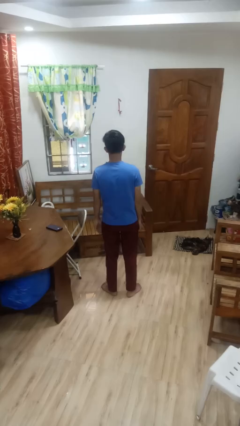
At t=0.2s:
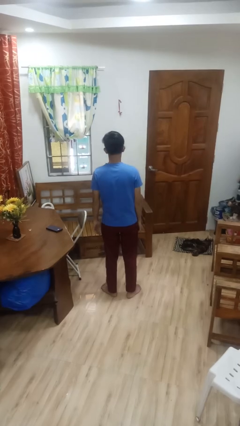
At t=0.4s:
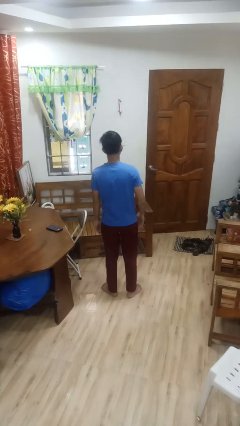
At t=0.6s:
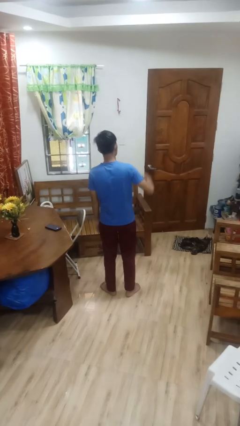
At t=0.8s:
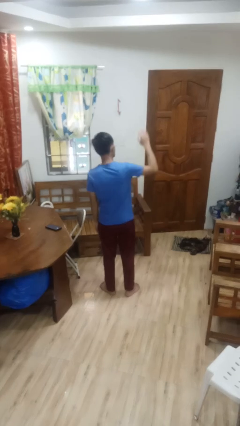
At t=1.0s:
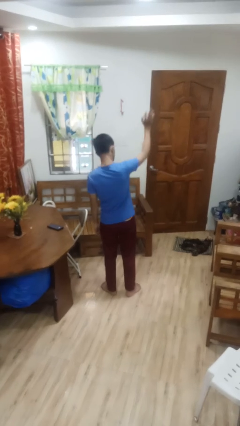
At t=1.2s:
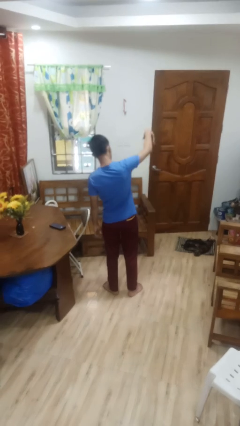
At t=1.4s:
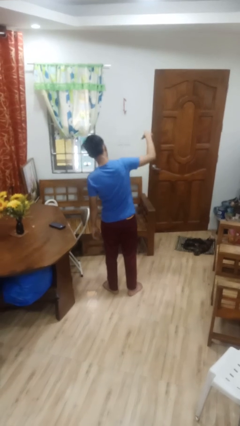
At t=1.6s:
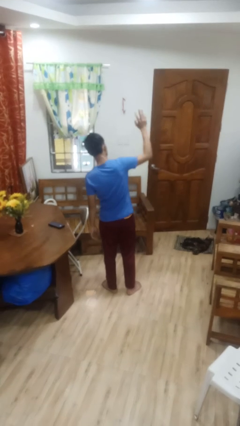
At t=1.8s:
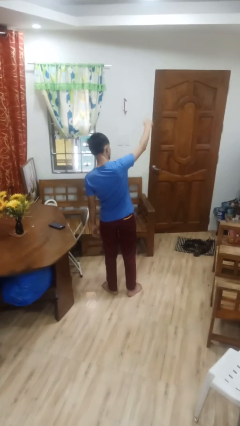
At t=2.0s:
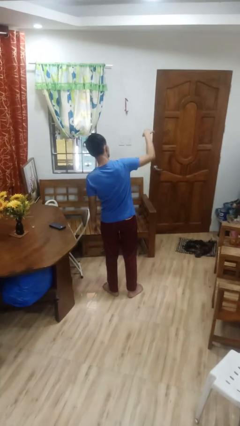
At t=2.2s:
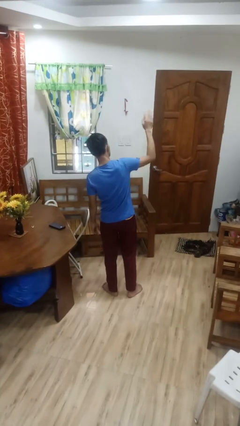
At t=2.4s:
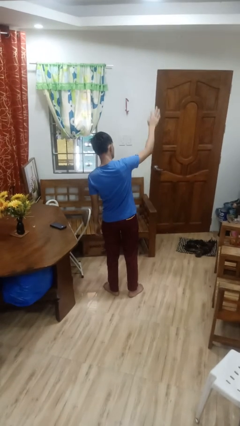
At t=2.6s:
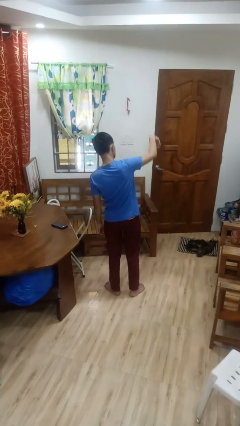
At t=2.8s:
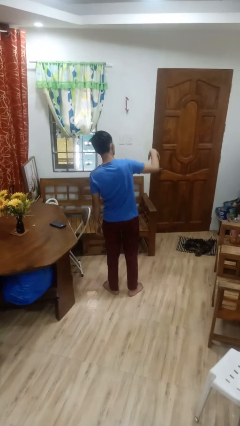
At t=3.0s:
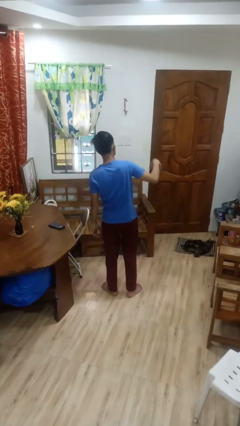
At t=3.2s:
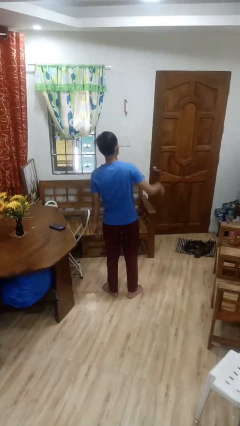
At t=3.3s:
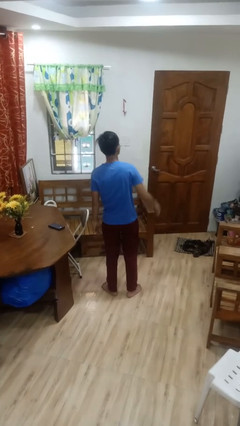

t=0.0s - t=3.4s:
person gestures come here

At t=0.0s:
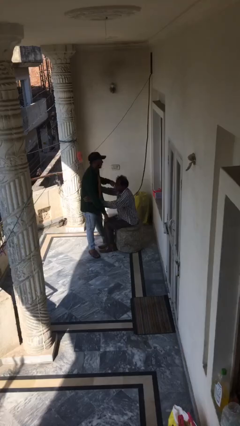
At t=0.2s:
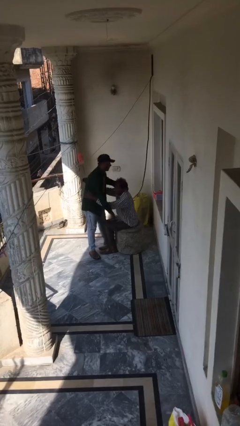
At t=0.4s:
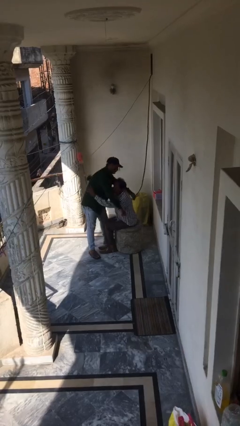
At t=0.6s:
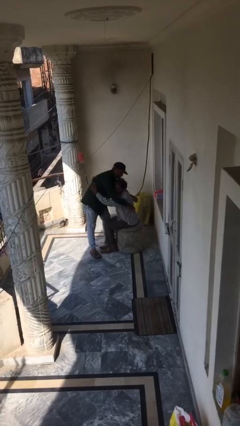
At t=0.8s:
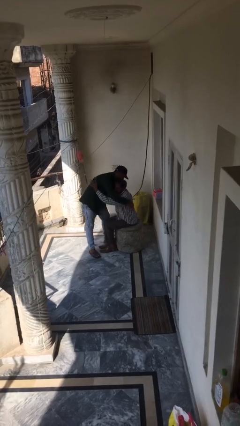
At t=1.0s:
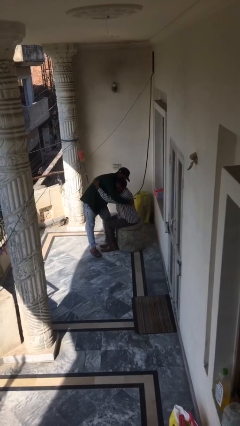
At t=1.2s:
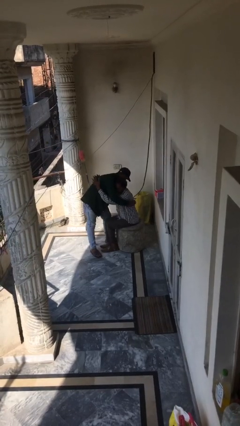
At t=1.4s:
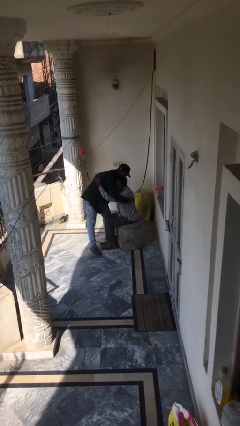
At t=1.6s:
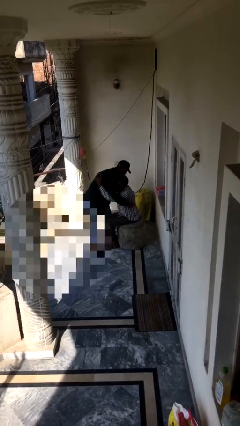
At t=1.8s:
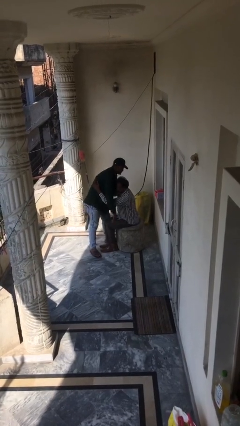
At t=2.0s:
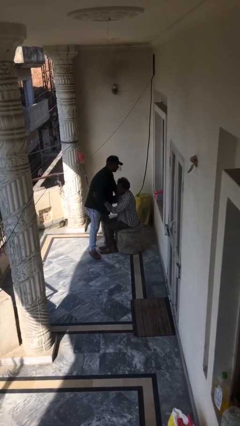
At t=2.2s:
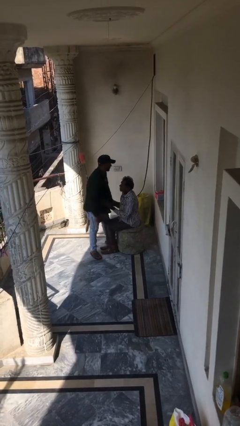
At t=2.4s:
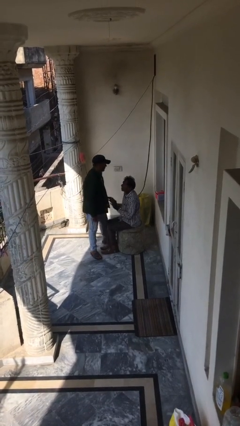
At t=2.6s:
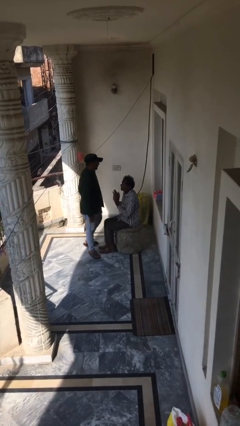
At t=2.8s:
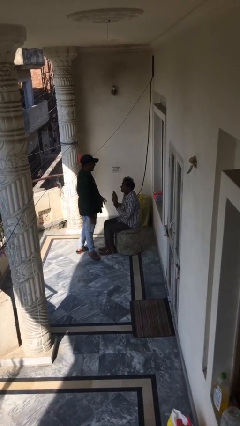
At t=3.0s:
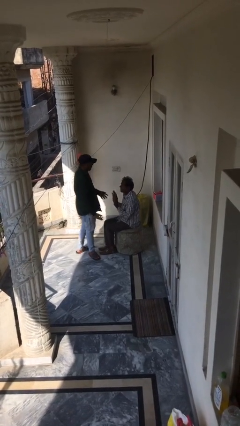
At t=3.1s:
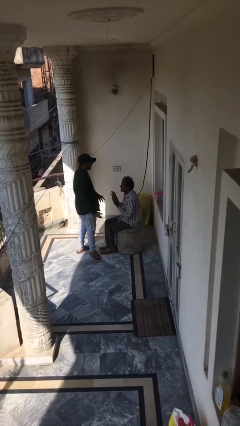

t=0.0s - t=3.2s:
person embraces person

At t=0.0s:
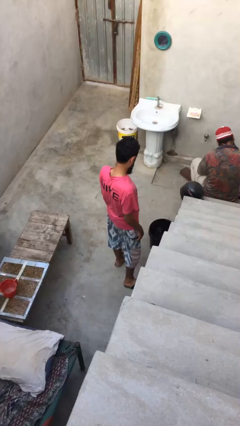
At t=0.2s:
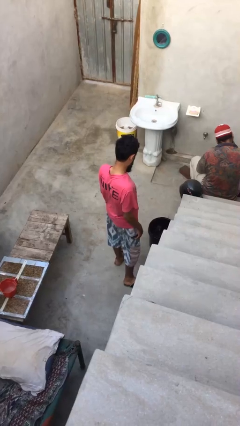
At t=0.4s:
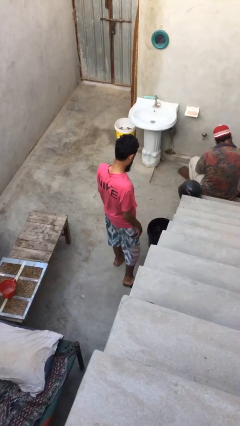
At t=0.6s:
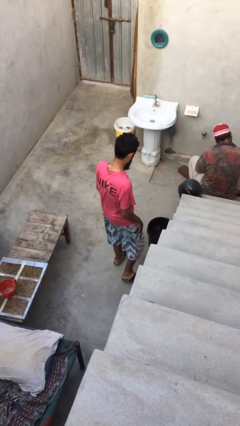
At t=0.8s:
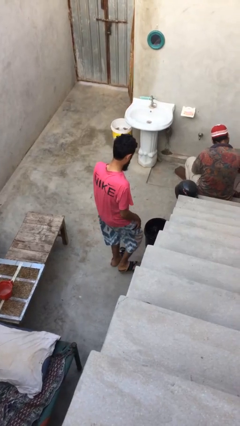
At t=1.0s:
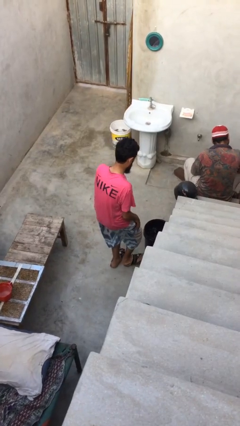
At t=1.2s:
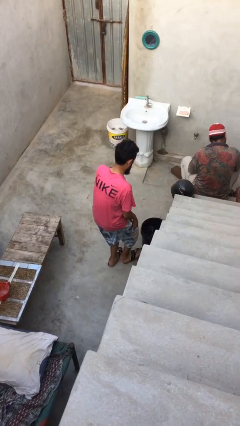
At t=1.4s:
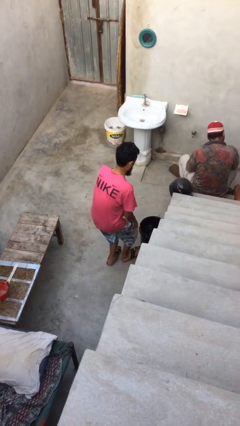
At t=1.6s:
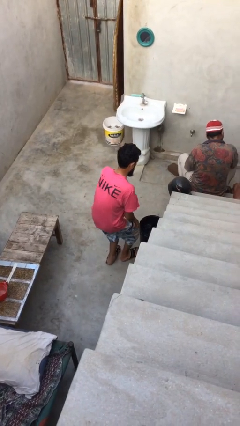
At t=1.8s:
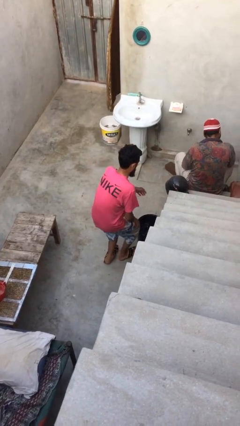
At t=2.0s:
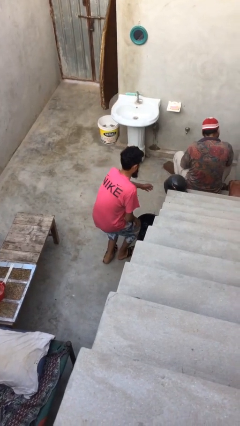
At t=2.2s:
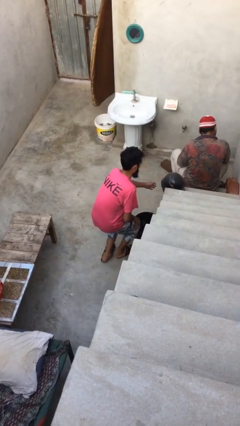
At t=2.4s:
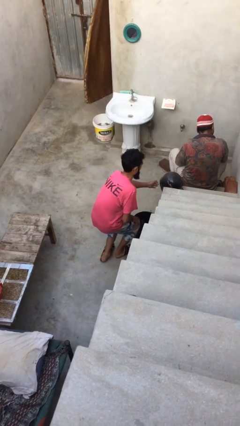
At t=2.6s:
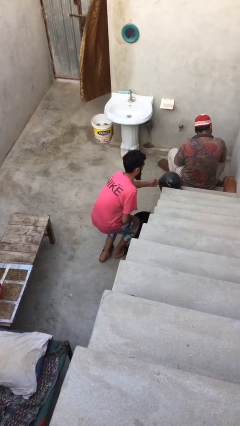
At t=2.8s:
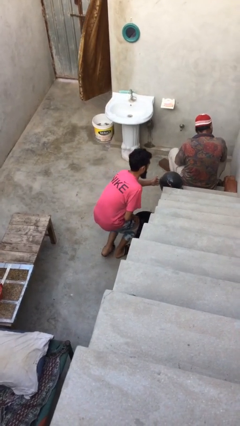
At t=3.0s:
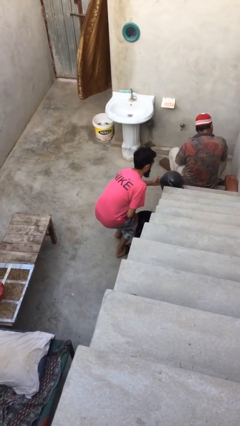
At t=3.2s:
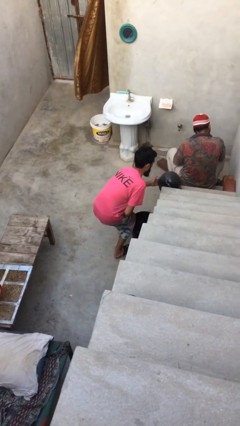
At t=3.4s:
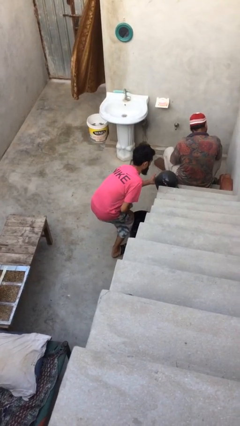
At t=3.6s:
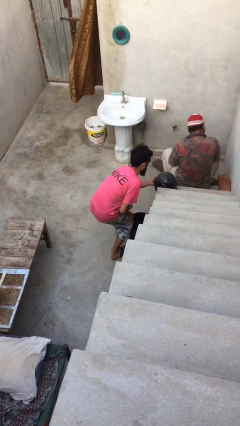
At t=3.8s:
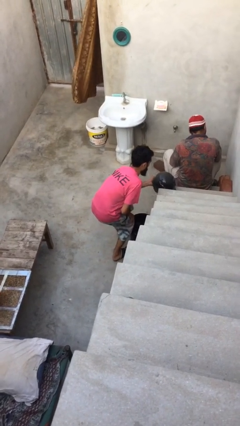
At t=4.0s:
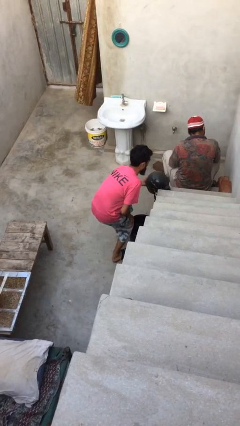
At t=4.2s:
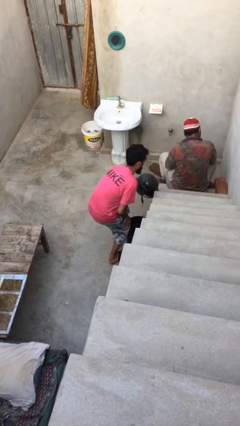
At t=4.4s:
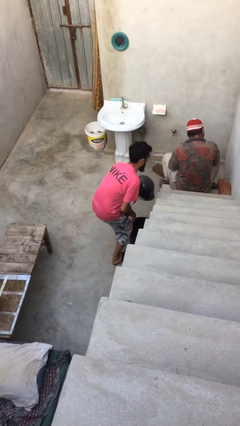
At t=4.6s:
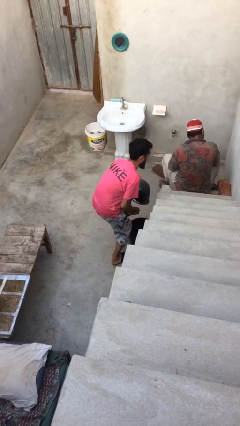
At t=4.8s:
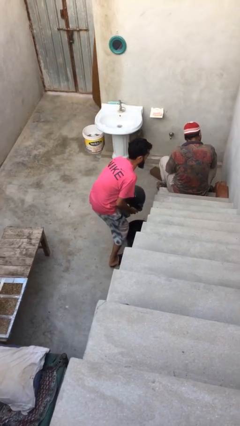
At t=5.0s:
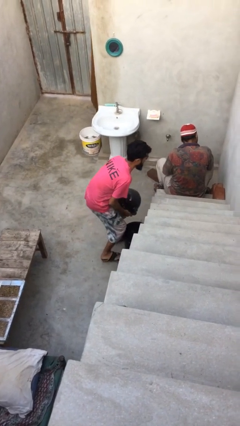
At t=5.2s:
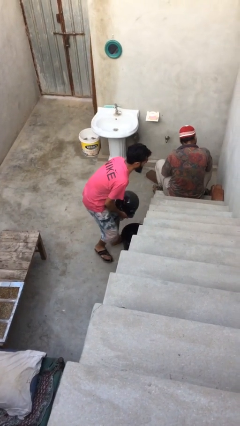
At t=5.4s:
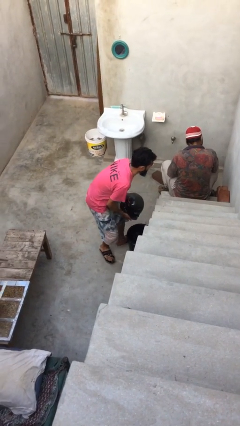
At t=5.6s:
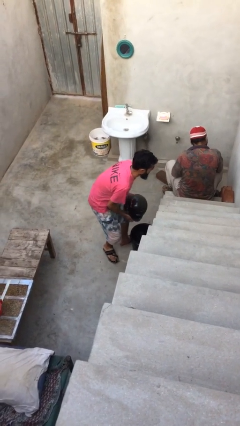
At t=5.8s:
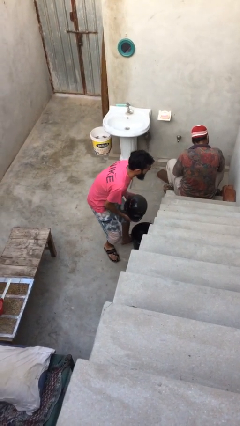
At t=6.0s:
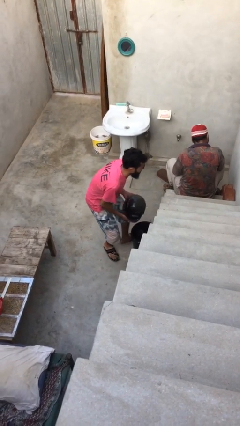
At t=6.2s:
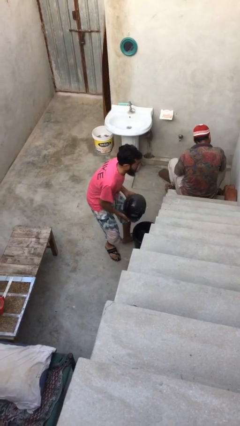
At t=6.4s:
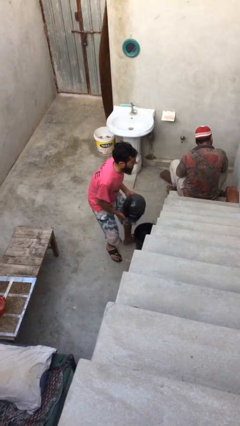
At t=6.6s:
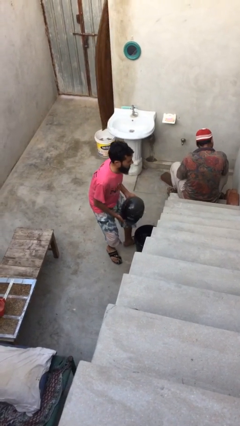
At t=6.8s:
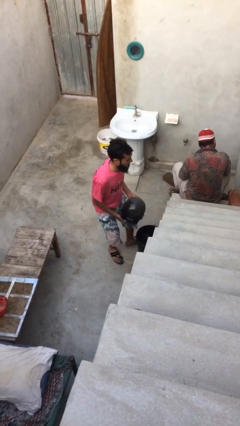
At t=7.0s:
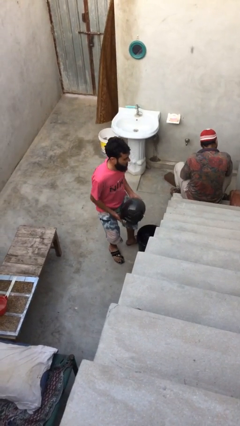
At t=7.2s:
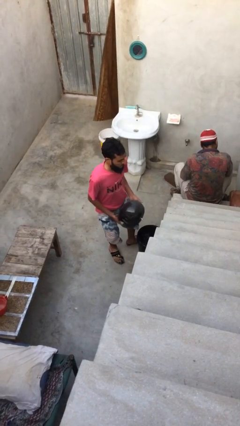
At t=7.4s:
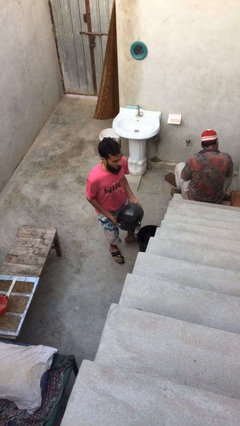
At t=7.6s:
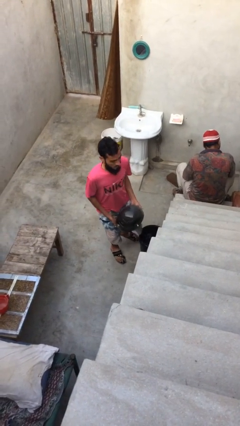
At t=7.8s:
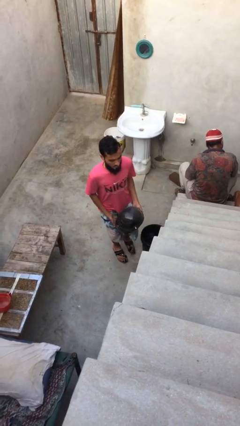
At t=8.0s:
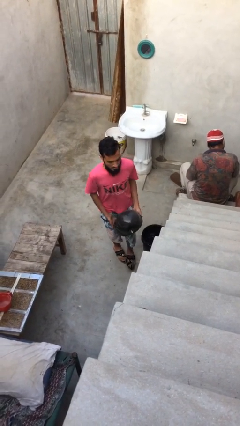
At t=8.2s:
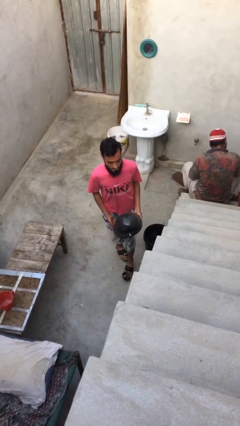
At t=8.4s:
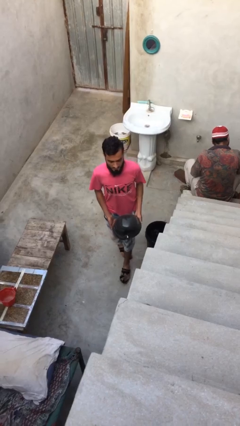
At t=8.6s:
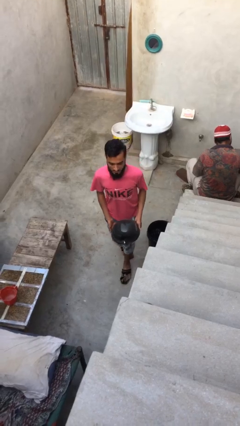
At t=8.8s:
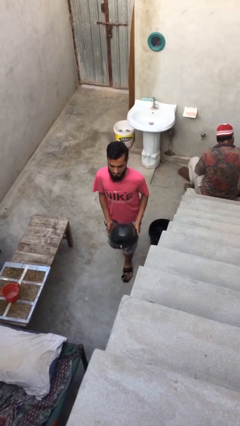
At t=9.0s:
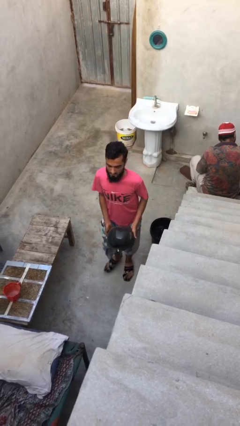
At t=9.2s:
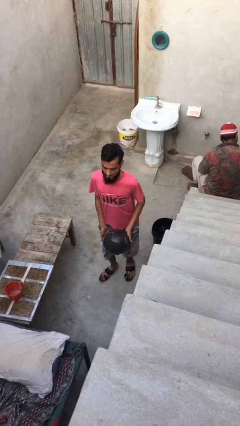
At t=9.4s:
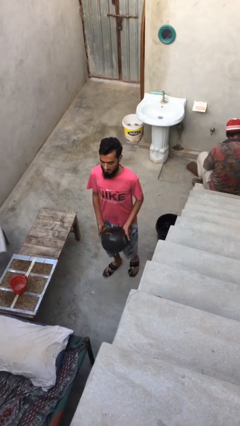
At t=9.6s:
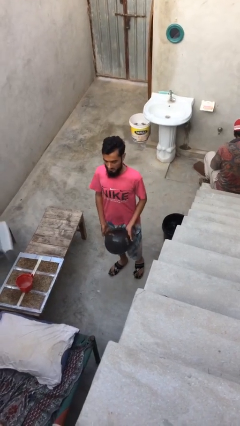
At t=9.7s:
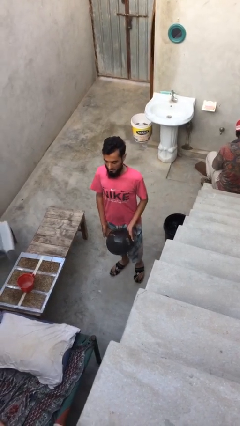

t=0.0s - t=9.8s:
person steals object from person

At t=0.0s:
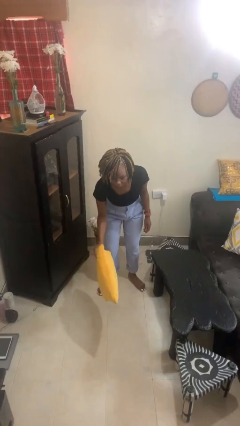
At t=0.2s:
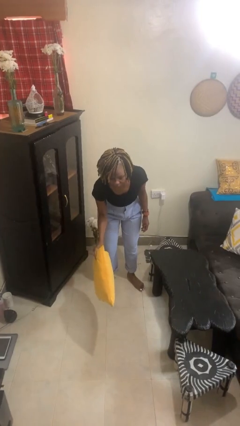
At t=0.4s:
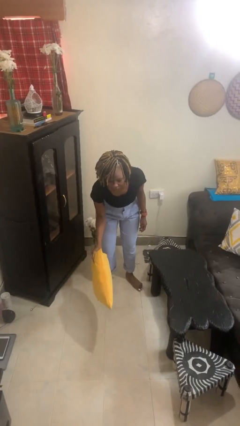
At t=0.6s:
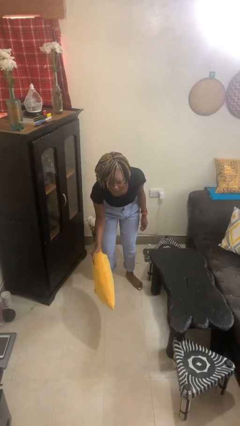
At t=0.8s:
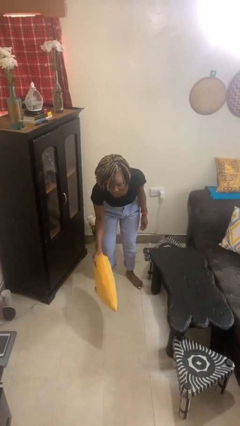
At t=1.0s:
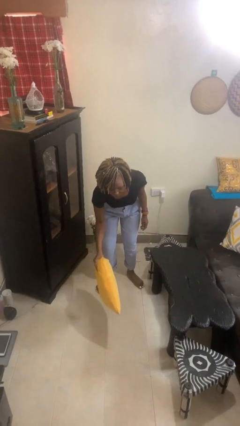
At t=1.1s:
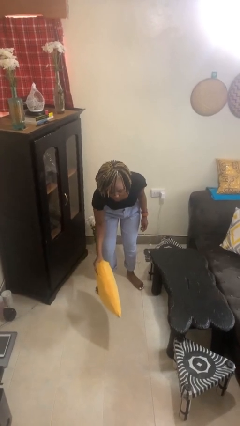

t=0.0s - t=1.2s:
person catches dropped object

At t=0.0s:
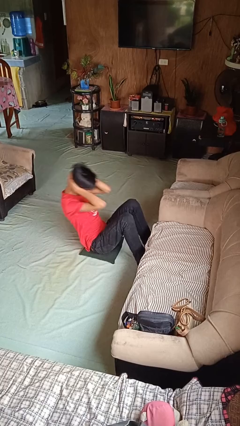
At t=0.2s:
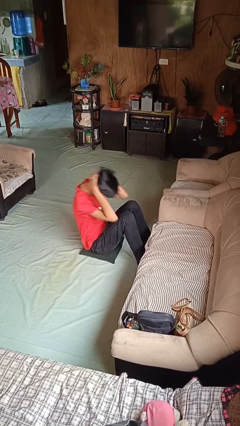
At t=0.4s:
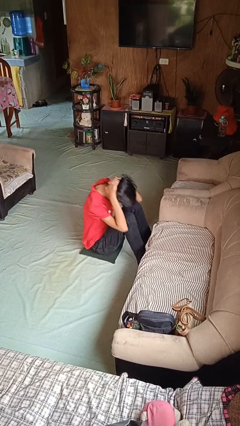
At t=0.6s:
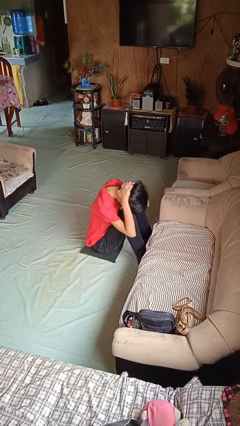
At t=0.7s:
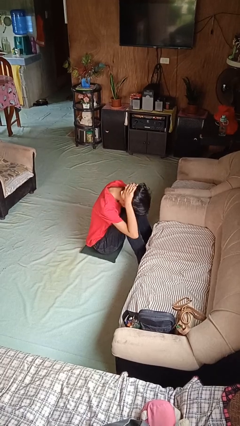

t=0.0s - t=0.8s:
person exercises with situp
